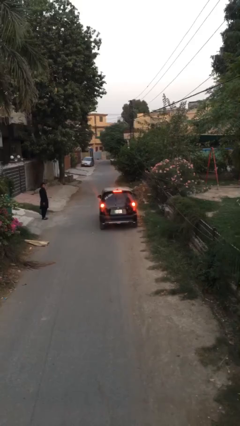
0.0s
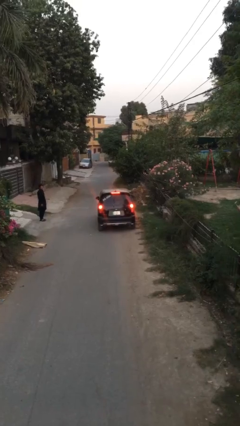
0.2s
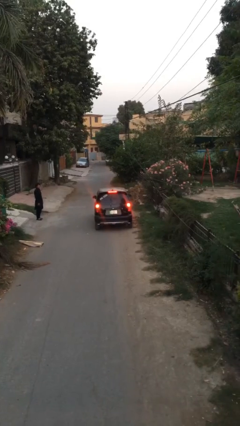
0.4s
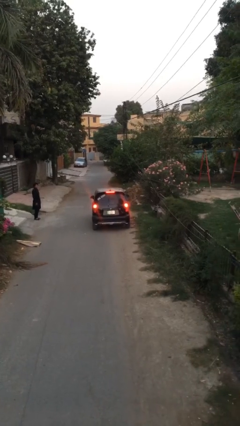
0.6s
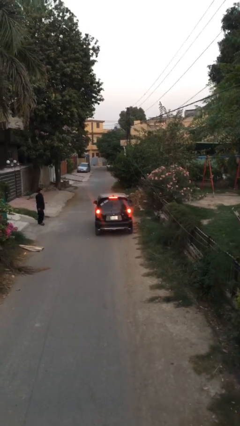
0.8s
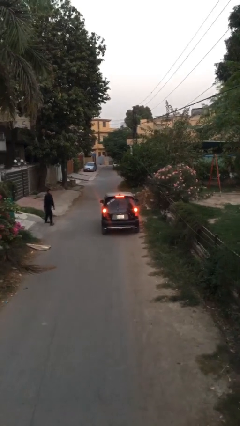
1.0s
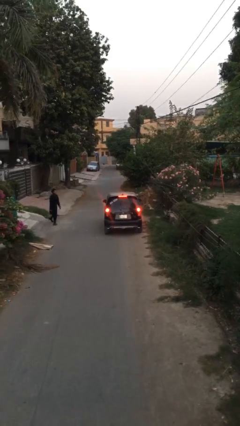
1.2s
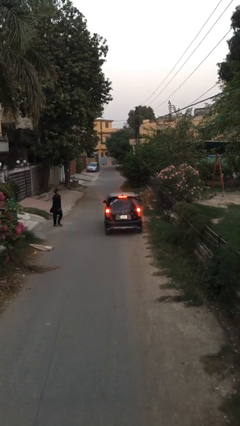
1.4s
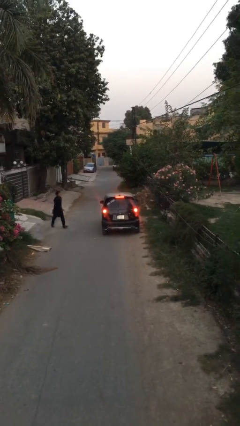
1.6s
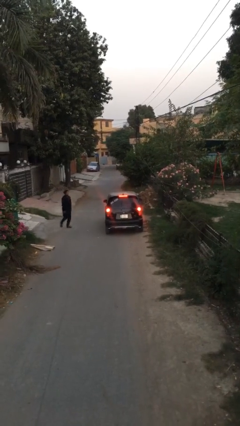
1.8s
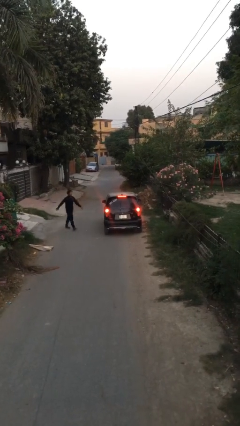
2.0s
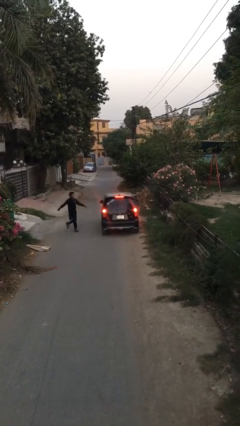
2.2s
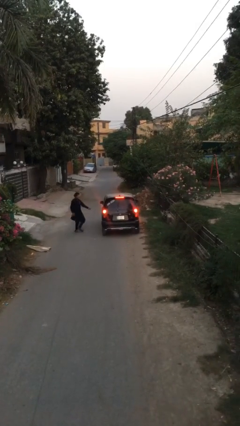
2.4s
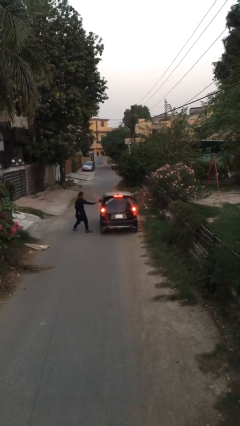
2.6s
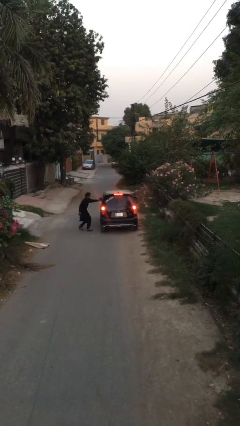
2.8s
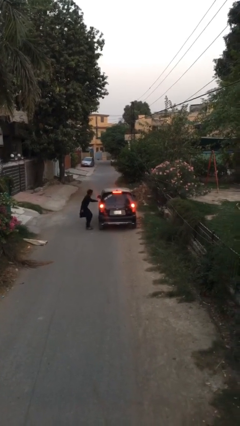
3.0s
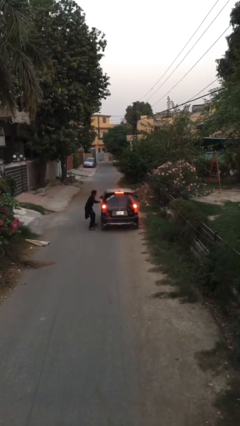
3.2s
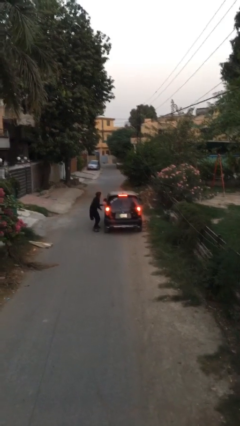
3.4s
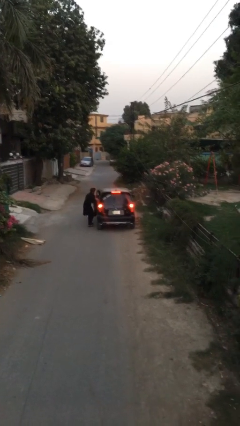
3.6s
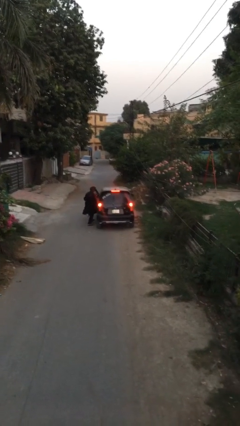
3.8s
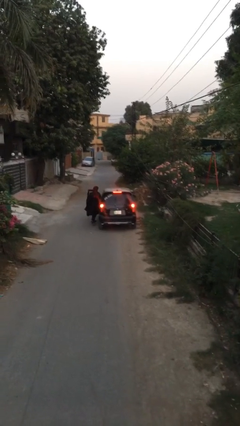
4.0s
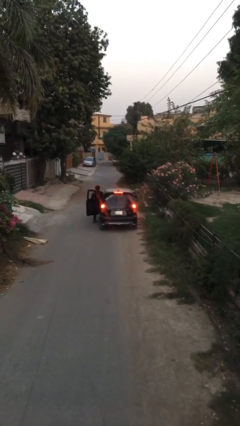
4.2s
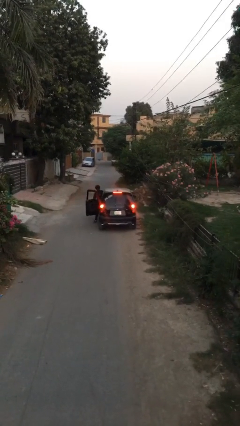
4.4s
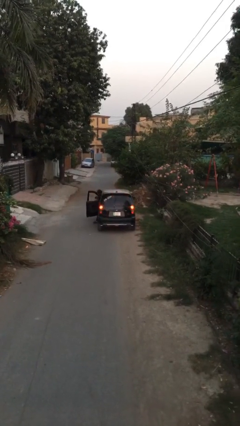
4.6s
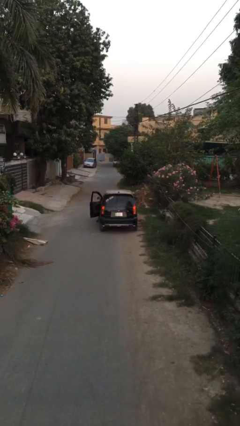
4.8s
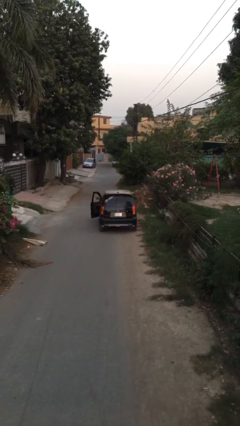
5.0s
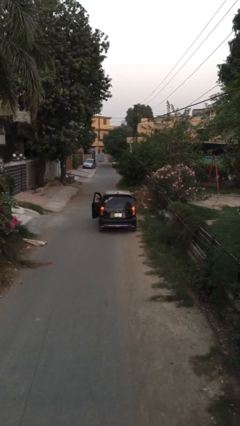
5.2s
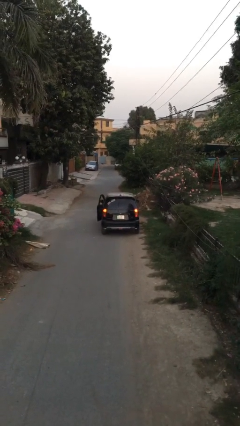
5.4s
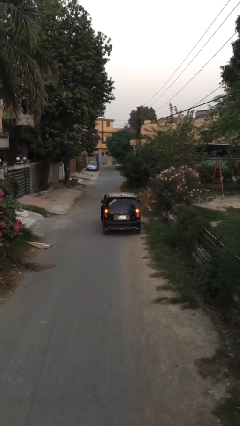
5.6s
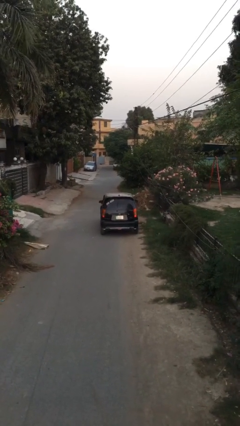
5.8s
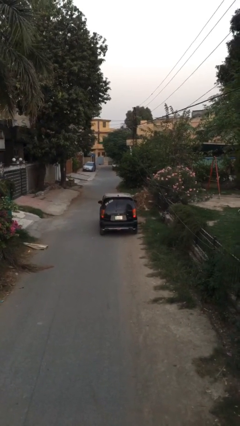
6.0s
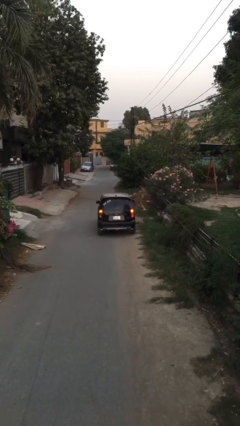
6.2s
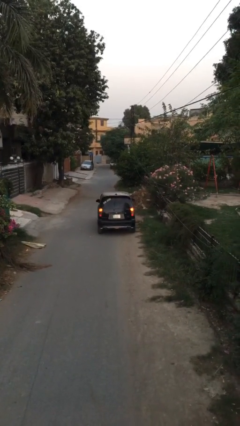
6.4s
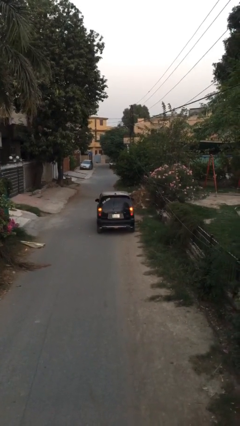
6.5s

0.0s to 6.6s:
car picks up person

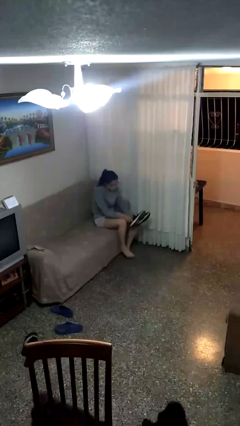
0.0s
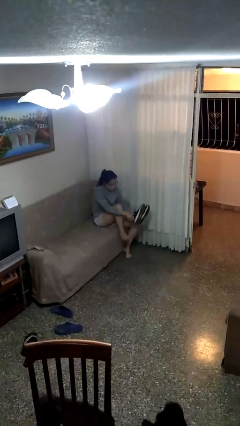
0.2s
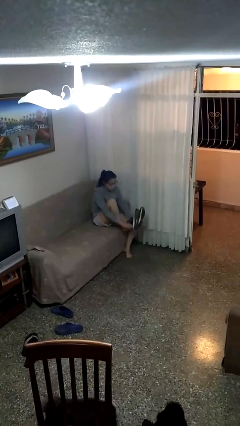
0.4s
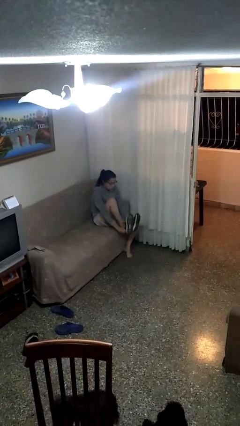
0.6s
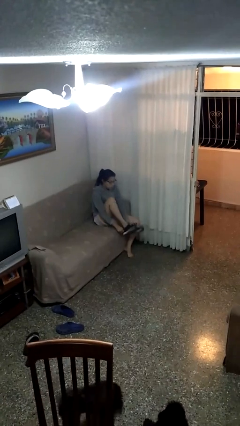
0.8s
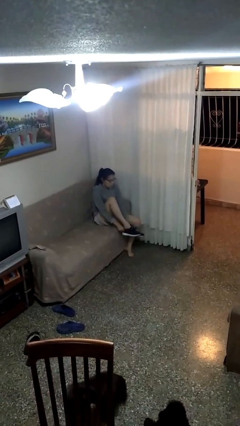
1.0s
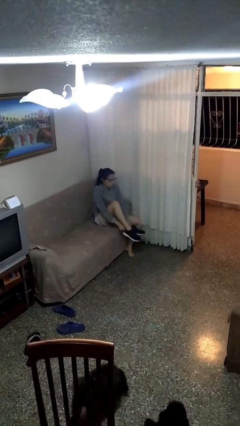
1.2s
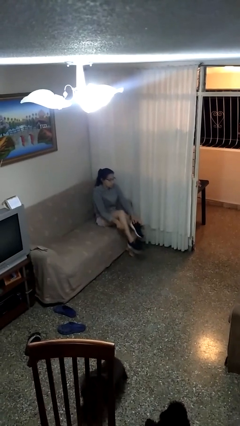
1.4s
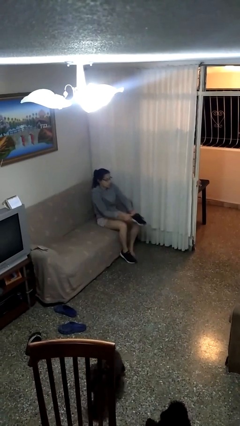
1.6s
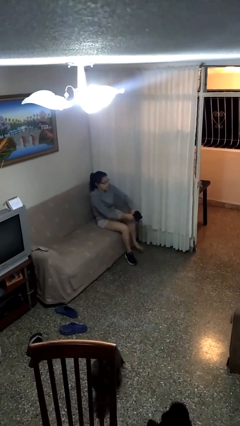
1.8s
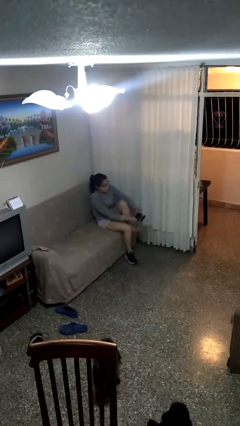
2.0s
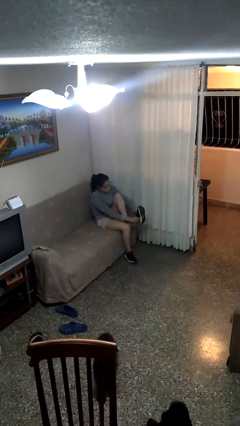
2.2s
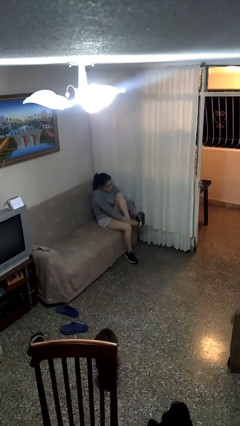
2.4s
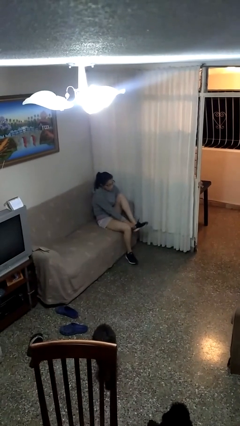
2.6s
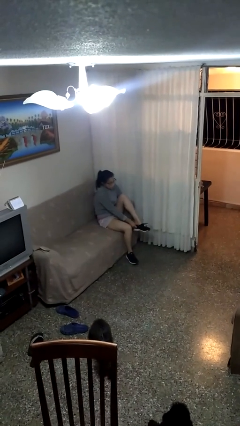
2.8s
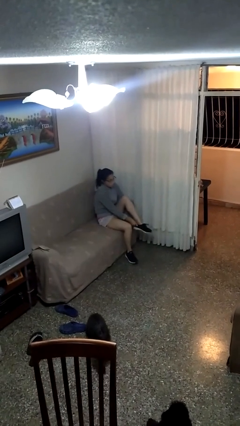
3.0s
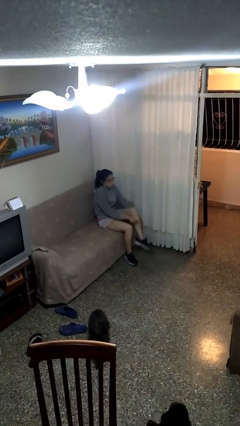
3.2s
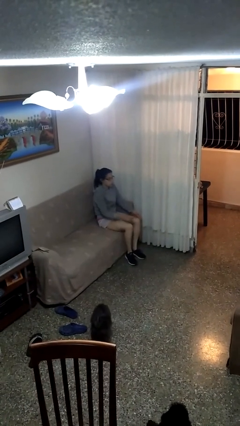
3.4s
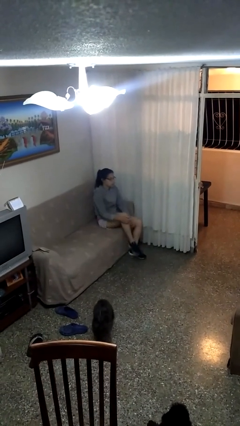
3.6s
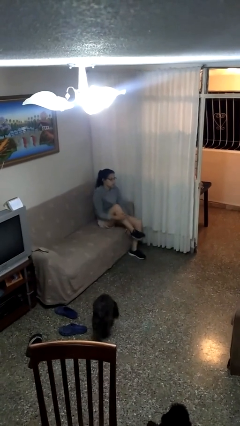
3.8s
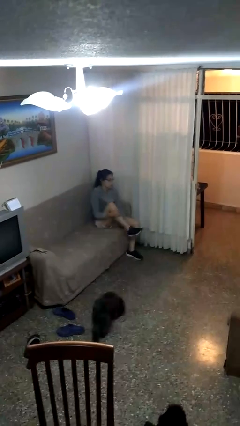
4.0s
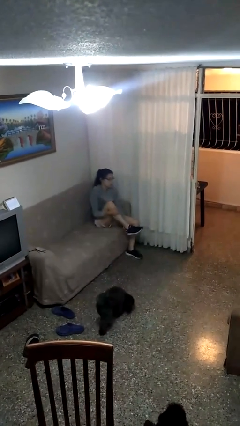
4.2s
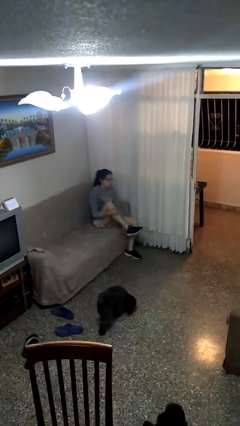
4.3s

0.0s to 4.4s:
person puts on shoes

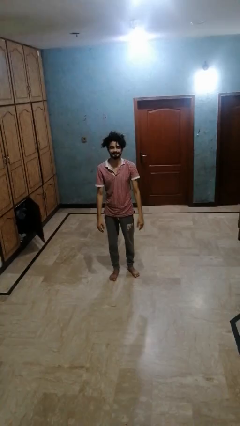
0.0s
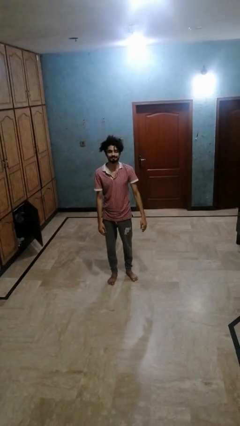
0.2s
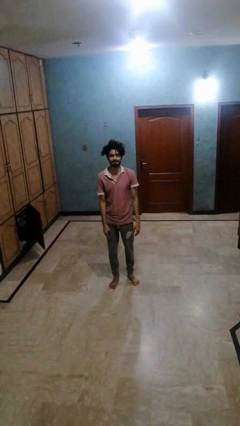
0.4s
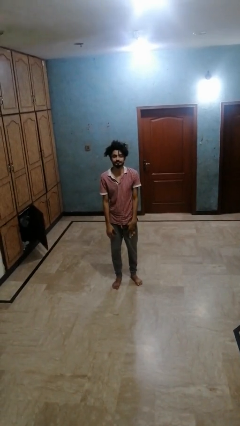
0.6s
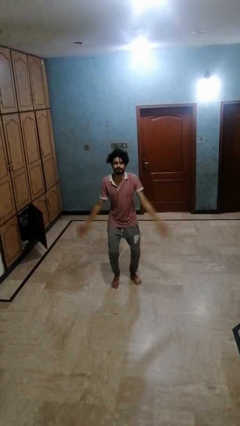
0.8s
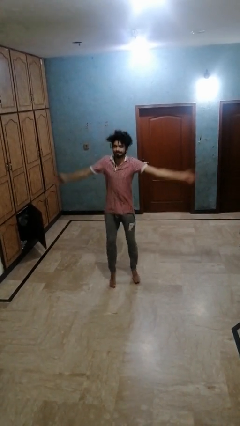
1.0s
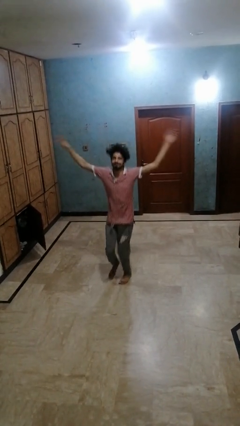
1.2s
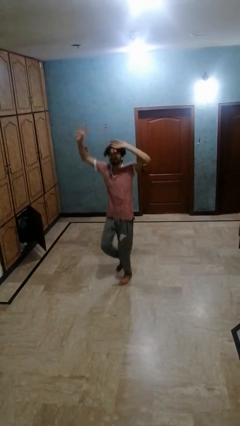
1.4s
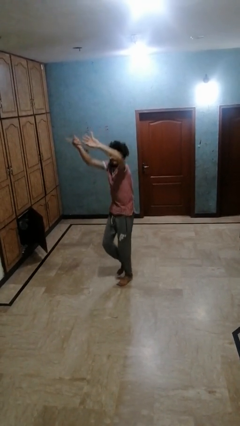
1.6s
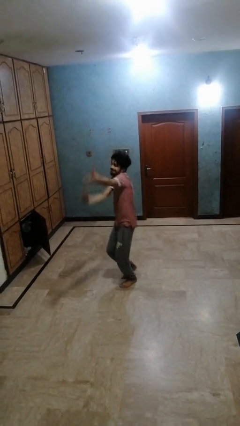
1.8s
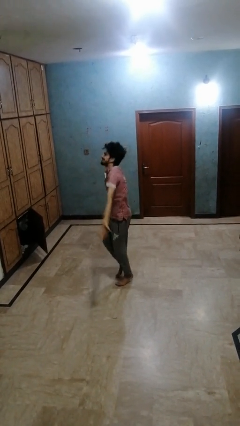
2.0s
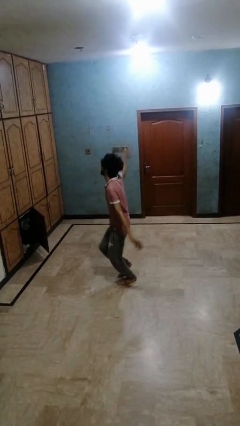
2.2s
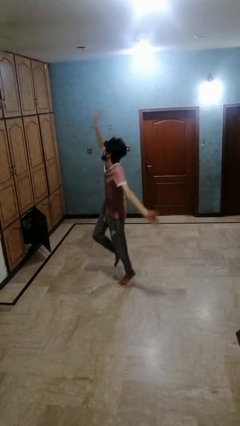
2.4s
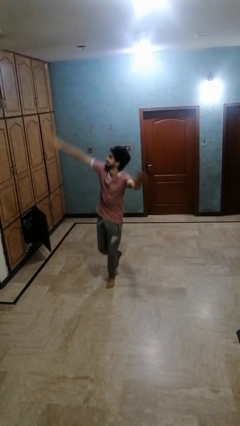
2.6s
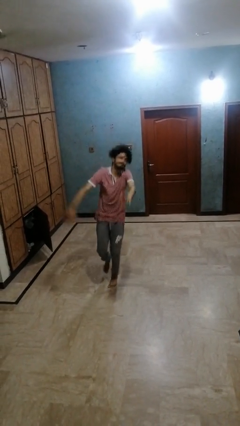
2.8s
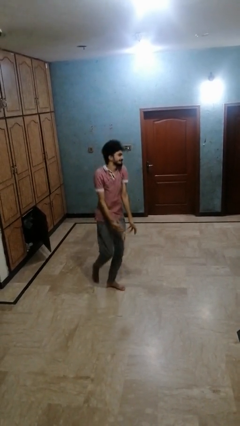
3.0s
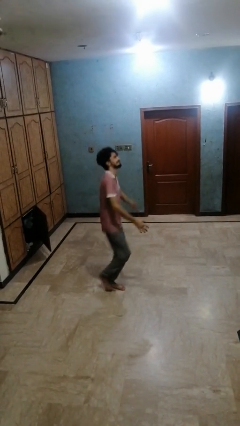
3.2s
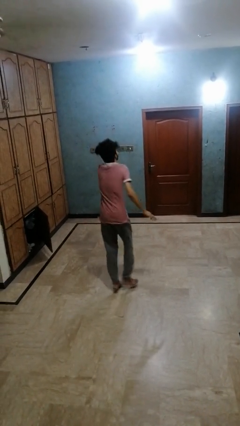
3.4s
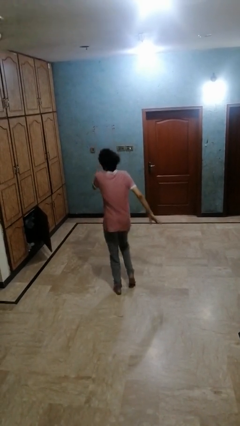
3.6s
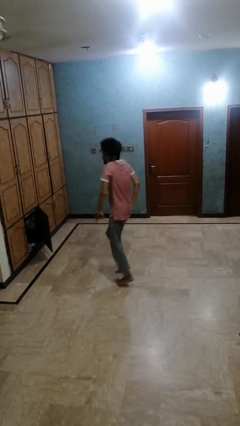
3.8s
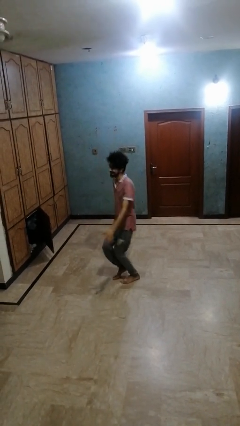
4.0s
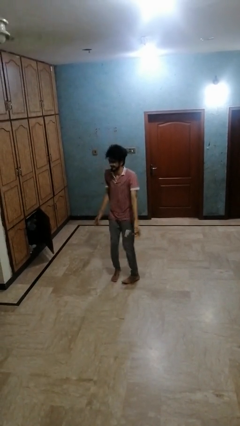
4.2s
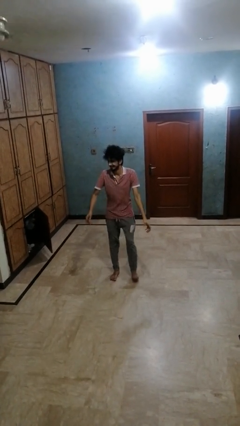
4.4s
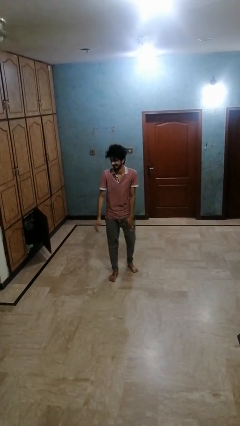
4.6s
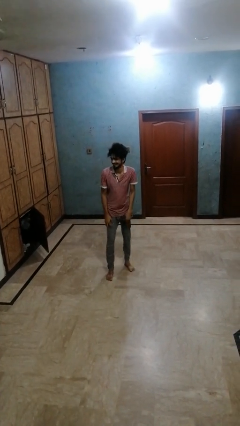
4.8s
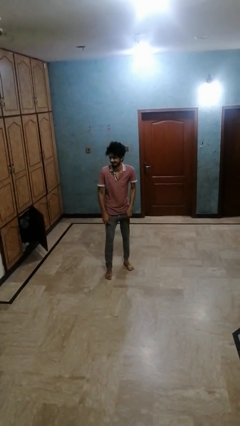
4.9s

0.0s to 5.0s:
person dances in place

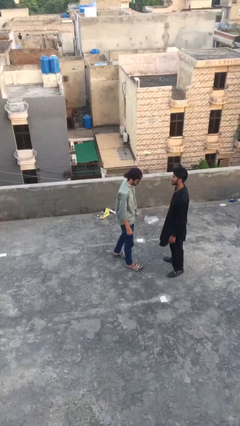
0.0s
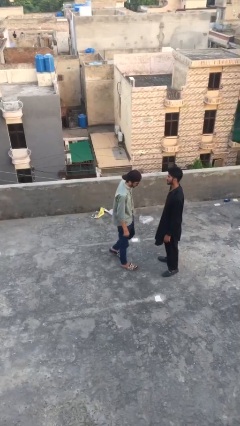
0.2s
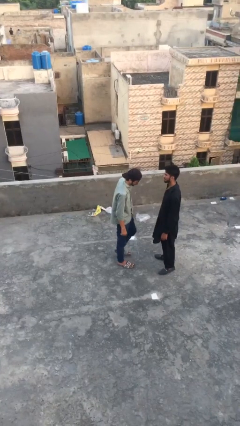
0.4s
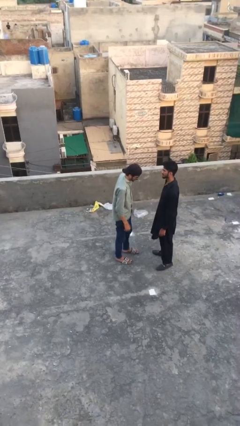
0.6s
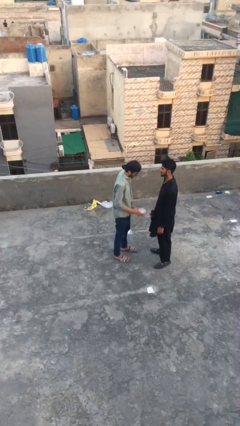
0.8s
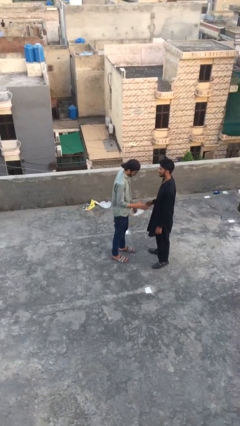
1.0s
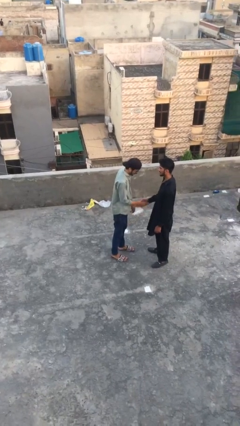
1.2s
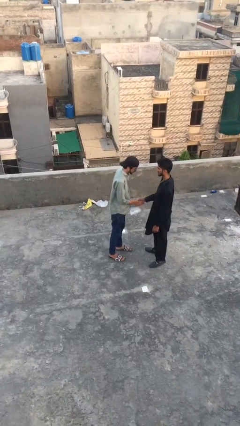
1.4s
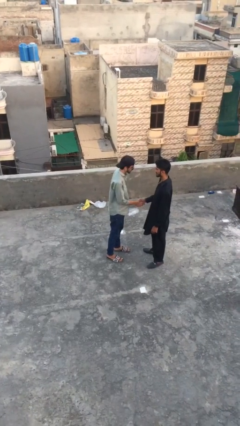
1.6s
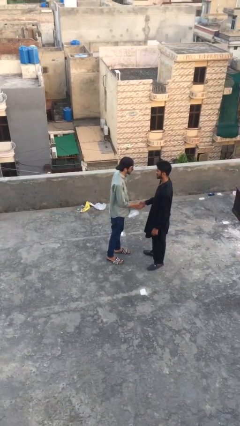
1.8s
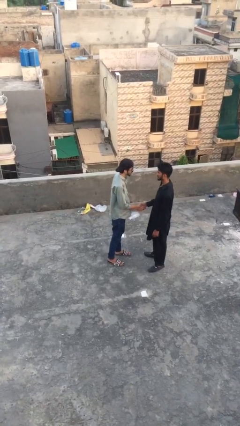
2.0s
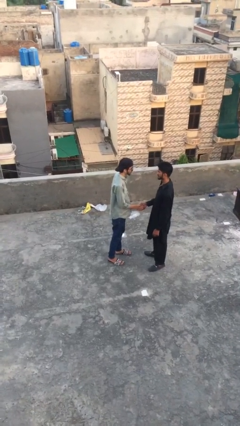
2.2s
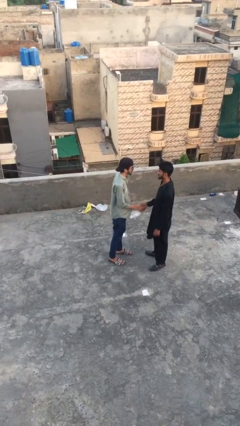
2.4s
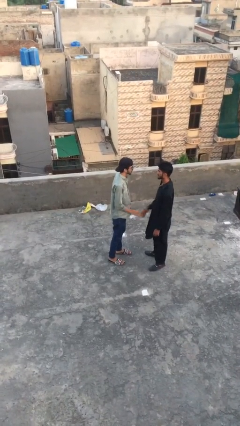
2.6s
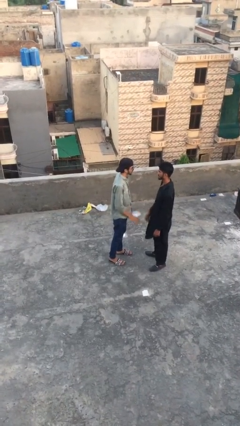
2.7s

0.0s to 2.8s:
person shakes hand
